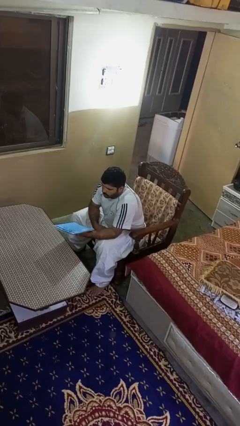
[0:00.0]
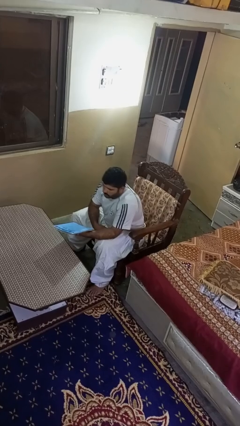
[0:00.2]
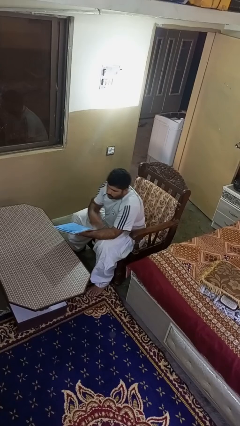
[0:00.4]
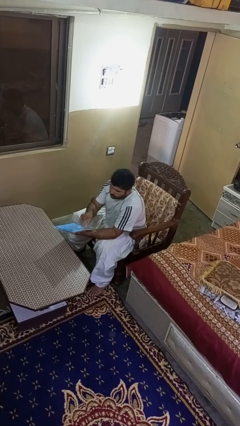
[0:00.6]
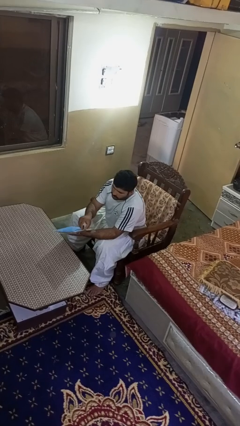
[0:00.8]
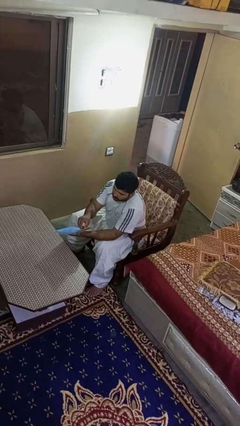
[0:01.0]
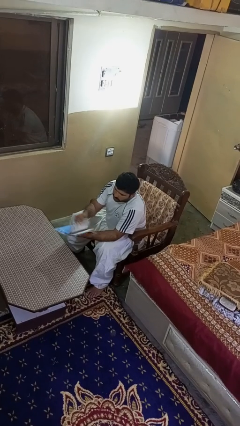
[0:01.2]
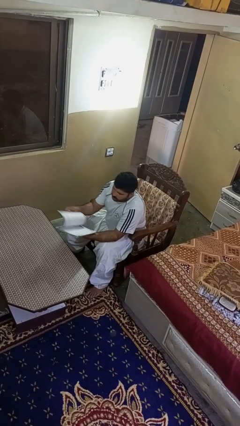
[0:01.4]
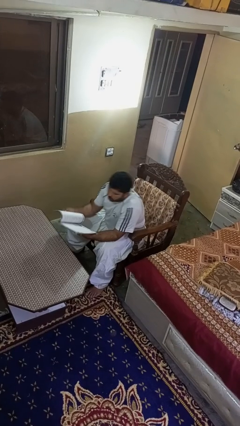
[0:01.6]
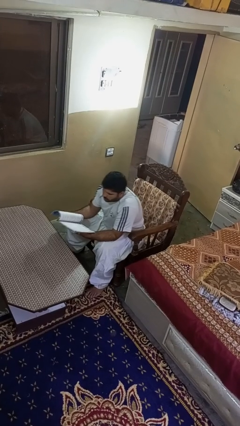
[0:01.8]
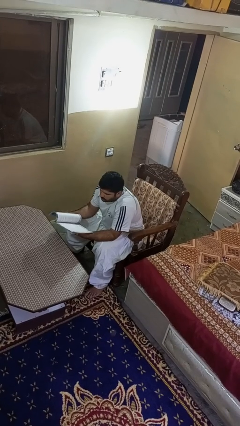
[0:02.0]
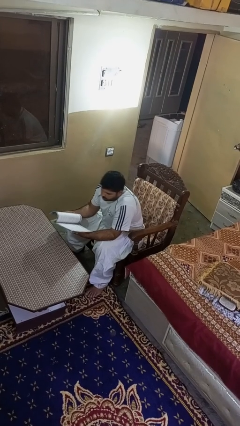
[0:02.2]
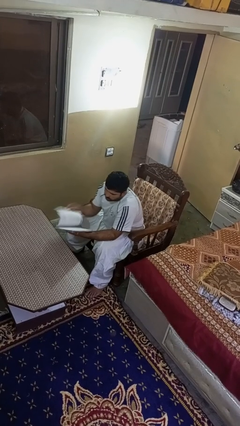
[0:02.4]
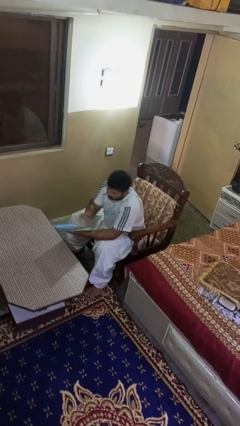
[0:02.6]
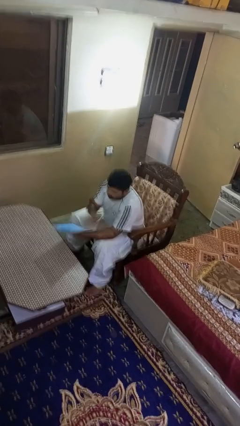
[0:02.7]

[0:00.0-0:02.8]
person reads magazine

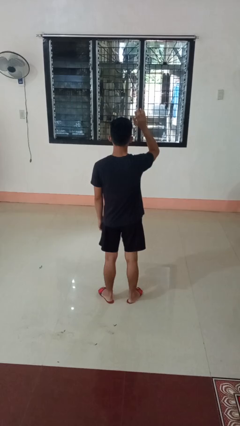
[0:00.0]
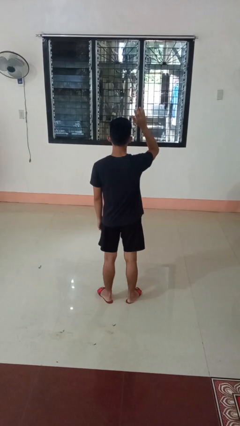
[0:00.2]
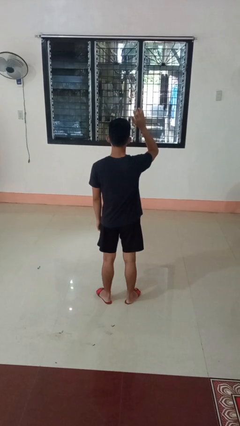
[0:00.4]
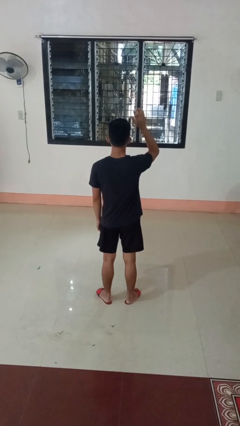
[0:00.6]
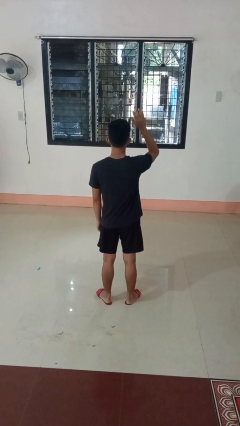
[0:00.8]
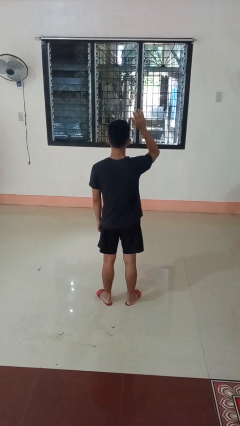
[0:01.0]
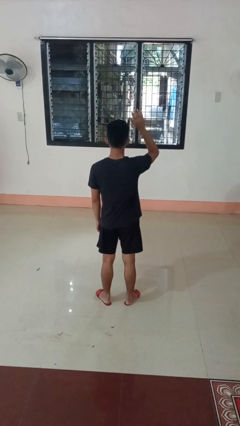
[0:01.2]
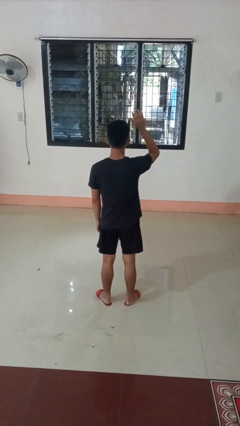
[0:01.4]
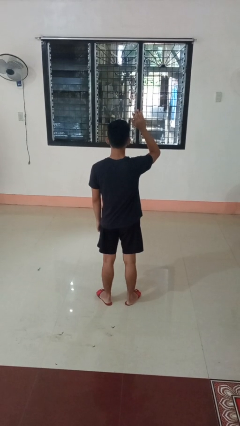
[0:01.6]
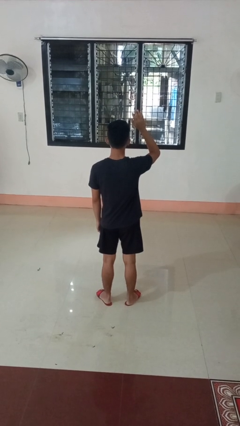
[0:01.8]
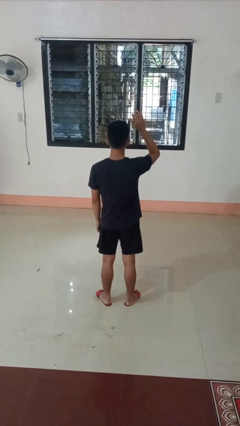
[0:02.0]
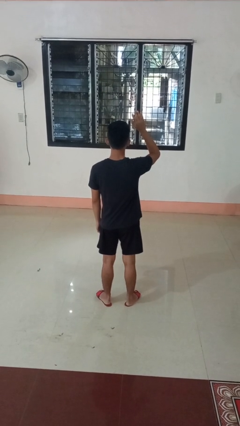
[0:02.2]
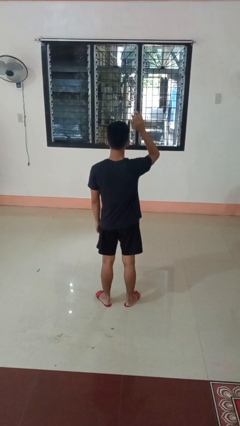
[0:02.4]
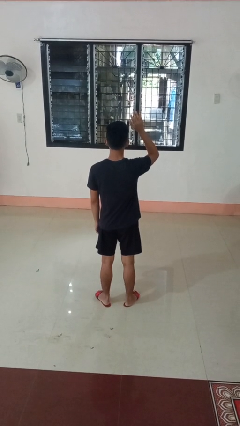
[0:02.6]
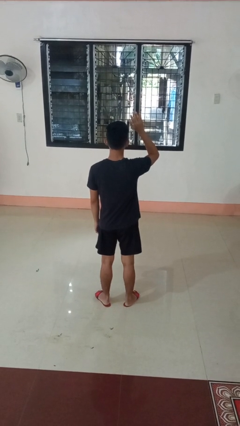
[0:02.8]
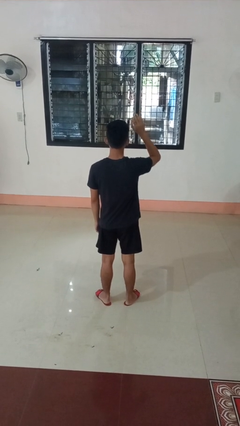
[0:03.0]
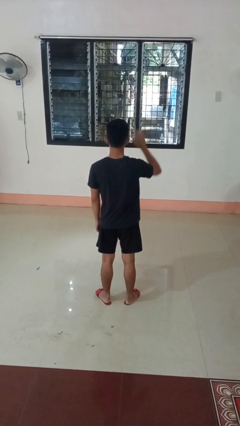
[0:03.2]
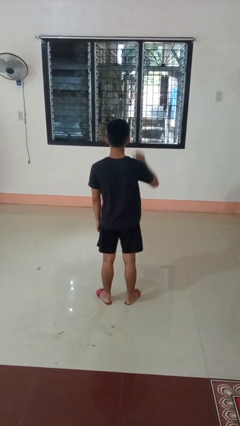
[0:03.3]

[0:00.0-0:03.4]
person gestures raise hand

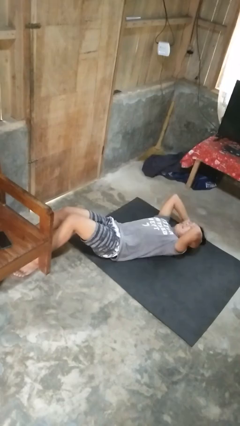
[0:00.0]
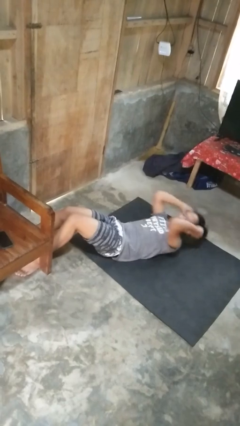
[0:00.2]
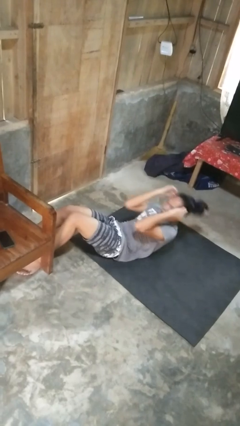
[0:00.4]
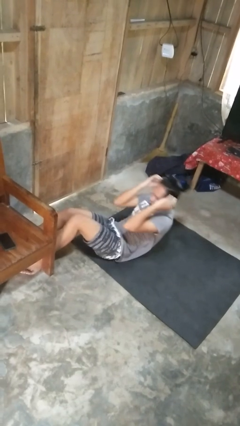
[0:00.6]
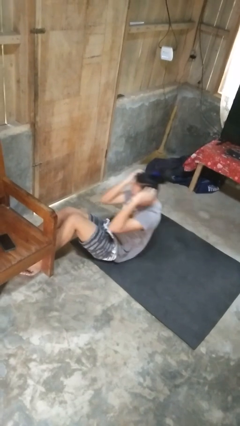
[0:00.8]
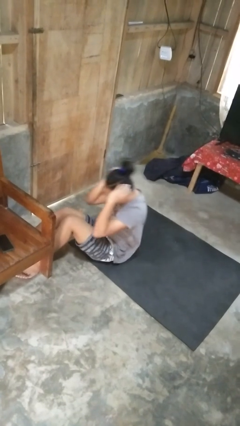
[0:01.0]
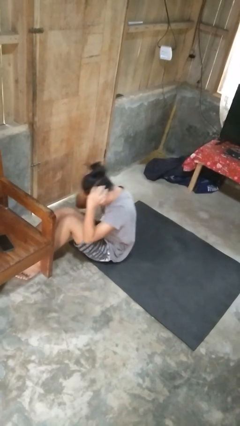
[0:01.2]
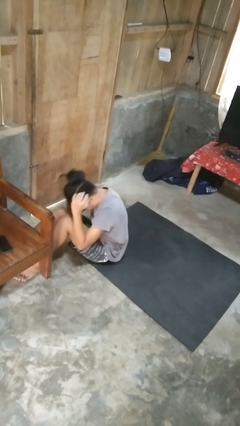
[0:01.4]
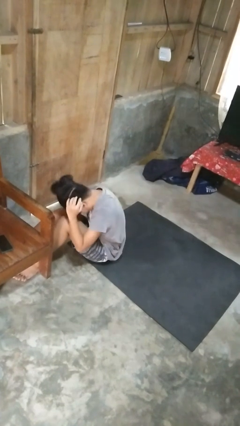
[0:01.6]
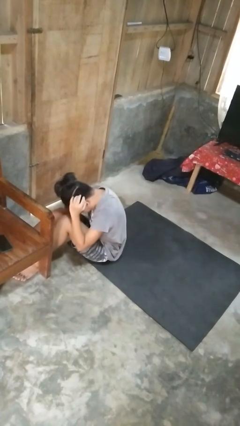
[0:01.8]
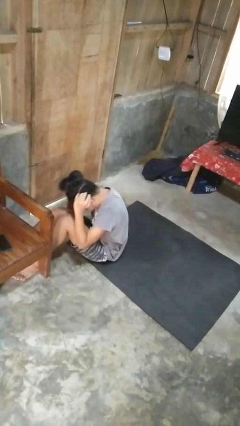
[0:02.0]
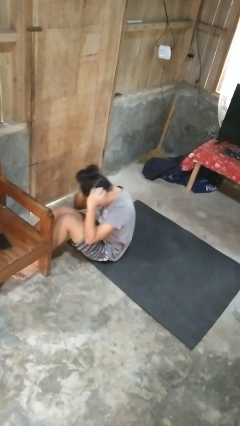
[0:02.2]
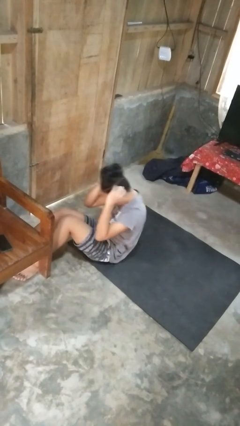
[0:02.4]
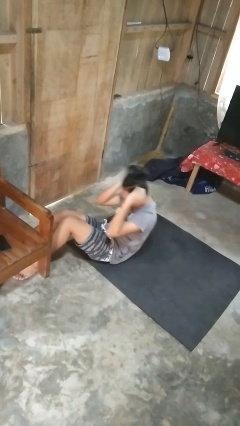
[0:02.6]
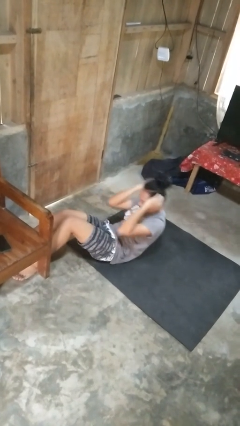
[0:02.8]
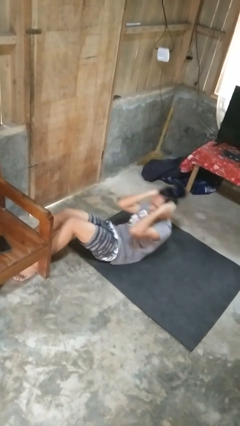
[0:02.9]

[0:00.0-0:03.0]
person exercises with situp

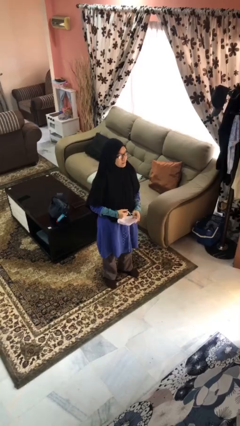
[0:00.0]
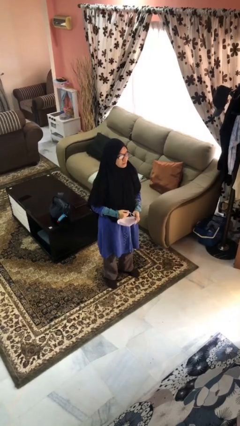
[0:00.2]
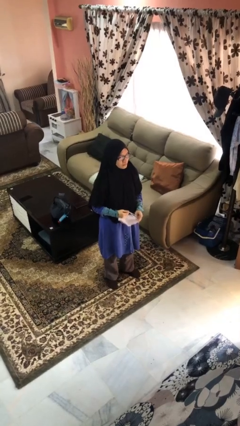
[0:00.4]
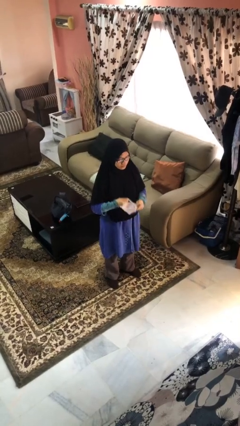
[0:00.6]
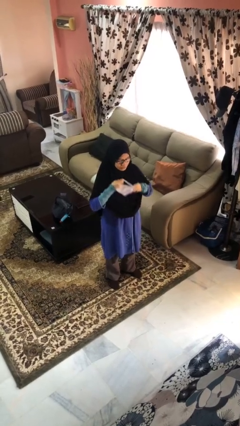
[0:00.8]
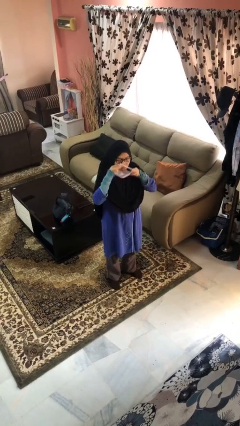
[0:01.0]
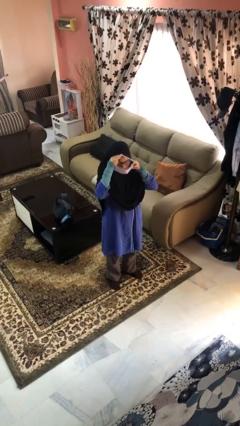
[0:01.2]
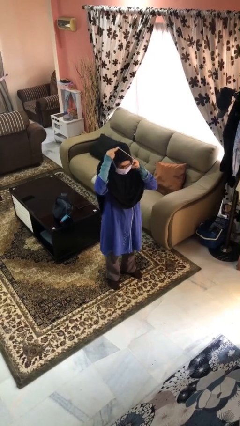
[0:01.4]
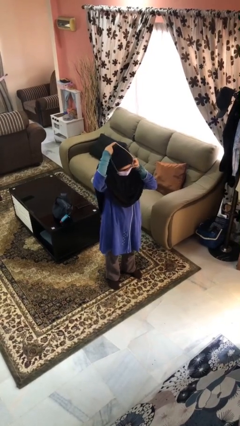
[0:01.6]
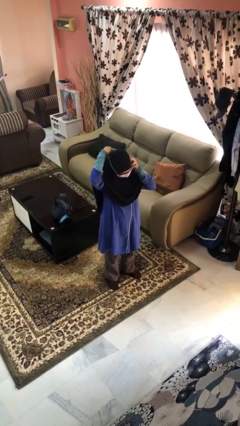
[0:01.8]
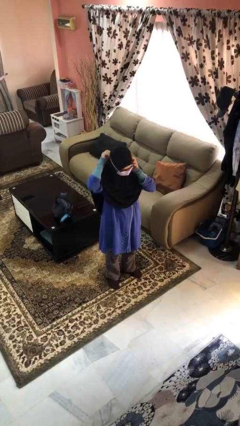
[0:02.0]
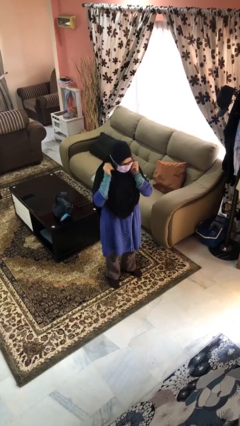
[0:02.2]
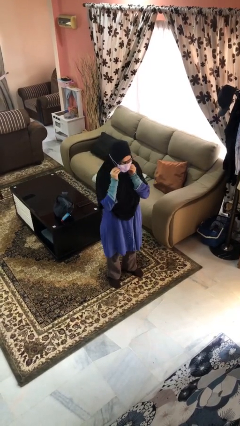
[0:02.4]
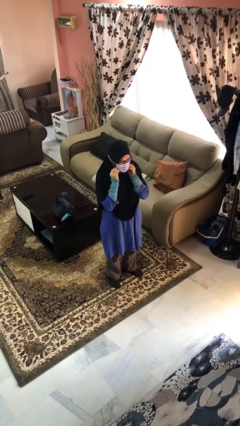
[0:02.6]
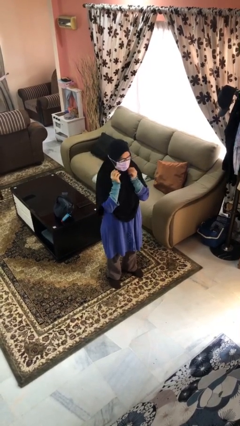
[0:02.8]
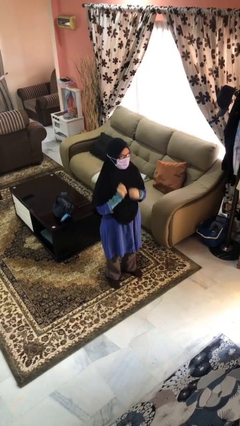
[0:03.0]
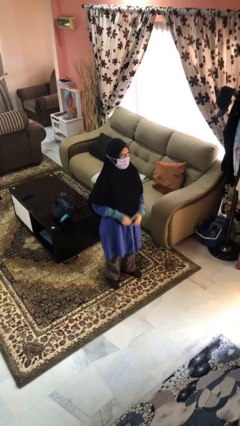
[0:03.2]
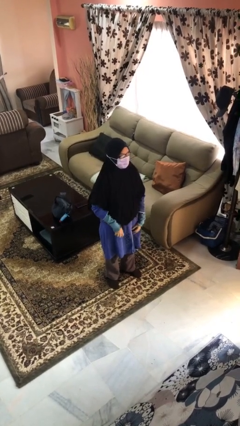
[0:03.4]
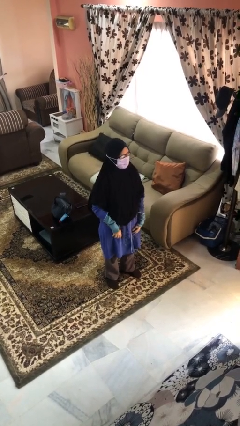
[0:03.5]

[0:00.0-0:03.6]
person puts on facemask

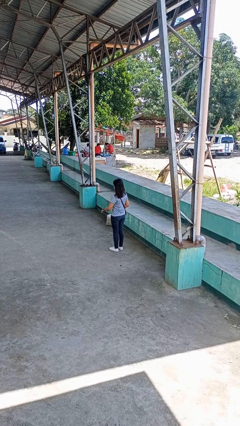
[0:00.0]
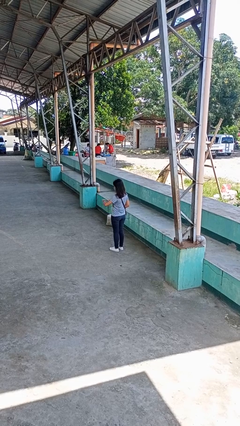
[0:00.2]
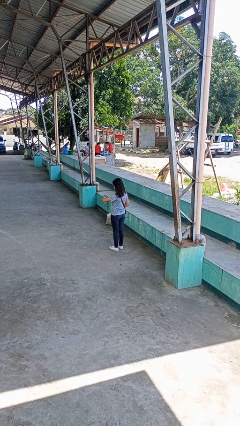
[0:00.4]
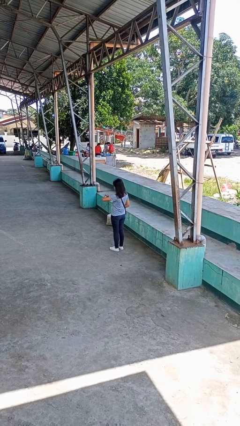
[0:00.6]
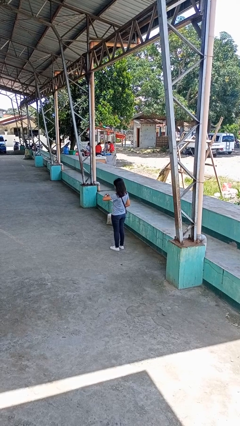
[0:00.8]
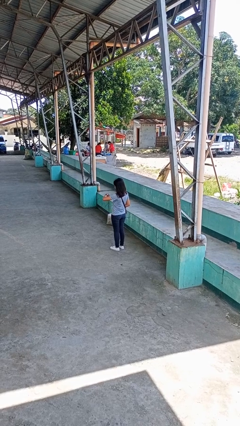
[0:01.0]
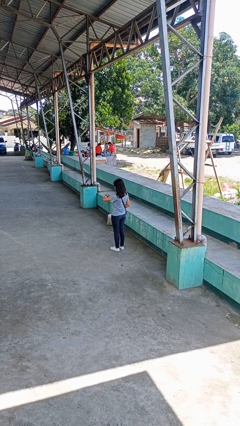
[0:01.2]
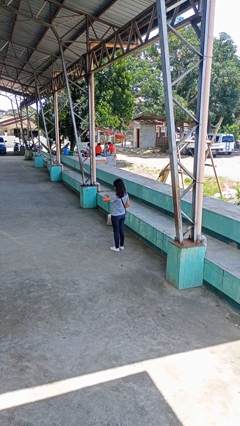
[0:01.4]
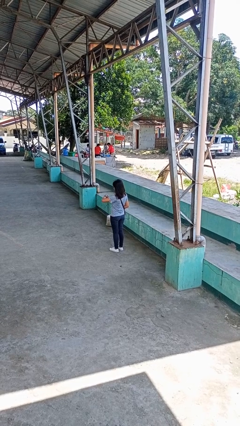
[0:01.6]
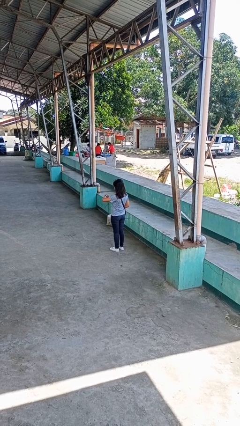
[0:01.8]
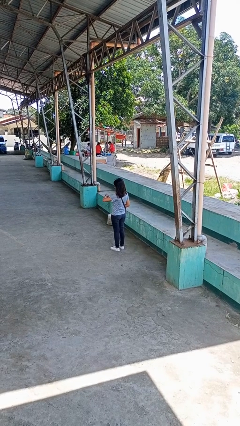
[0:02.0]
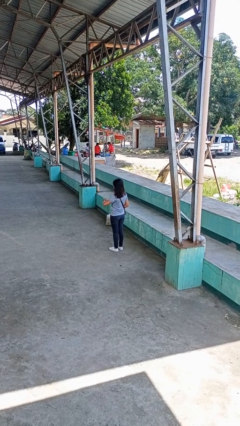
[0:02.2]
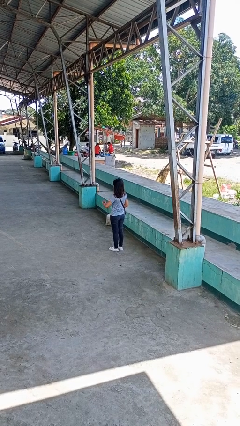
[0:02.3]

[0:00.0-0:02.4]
person looks at wristwatch

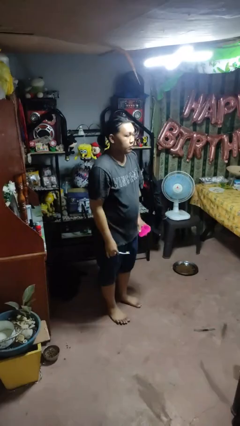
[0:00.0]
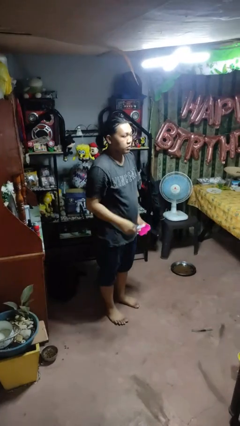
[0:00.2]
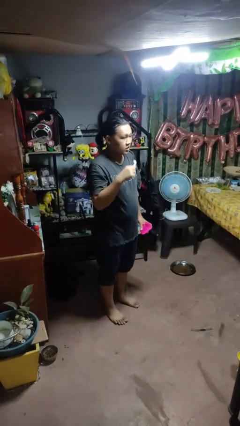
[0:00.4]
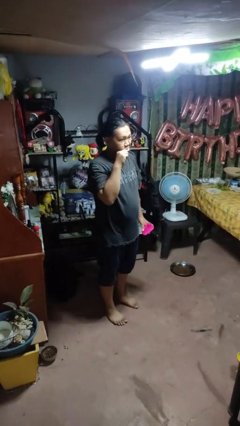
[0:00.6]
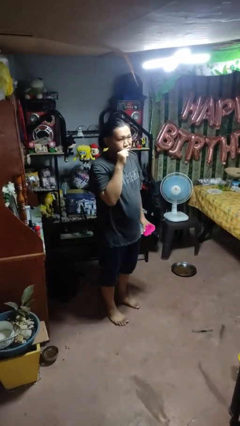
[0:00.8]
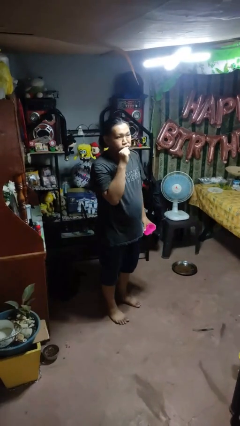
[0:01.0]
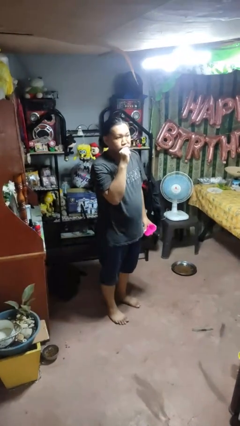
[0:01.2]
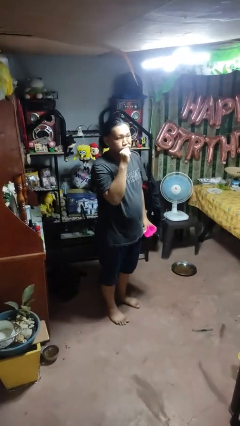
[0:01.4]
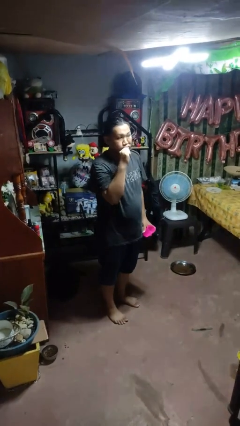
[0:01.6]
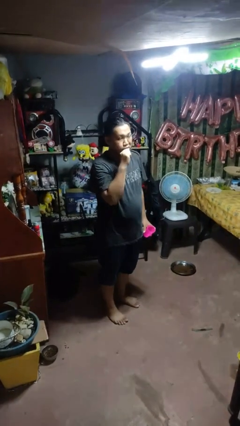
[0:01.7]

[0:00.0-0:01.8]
person brushes teeth
